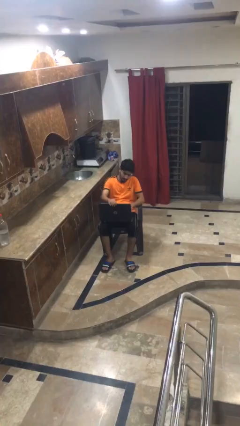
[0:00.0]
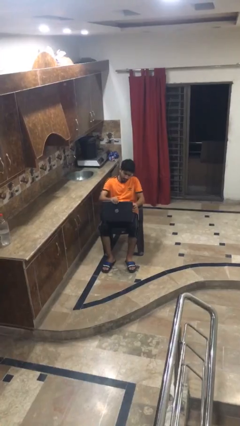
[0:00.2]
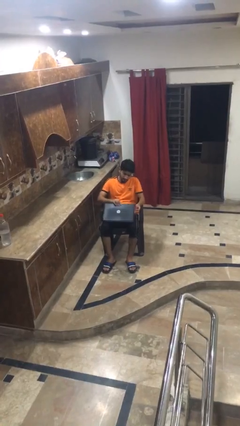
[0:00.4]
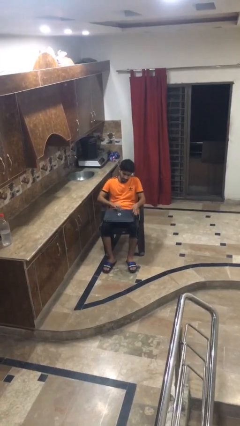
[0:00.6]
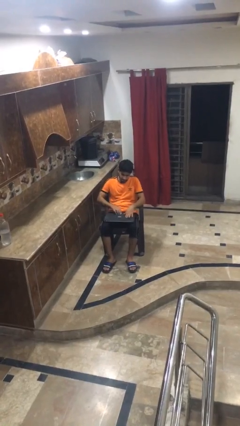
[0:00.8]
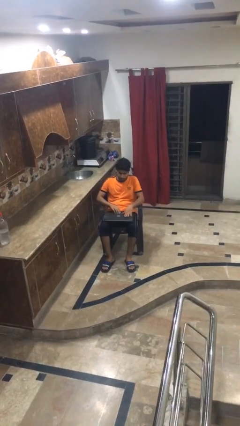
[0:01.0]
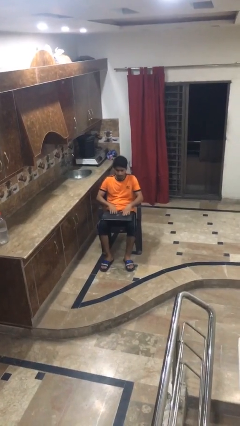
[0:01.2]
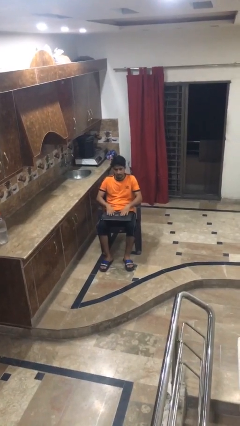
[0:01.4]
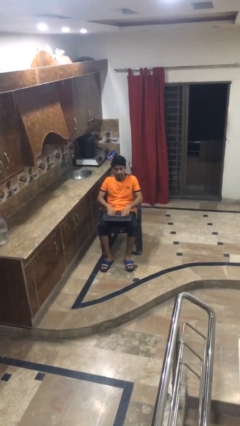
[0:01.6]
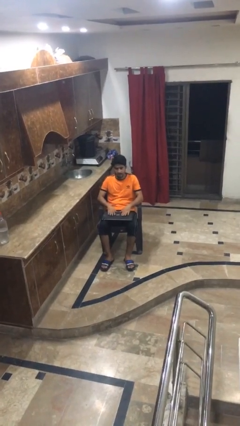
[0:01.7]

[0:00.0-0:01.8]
person closes laptop

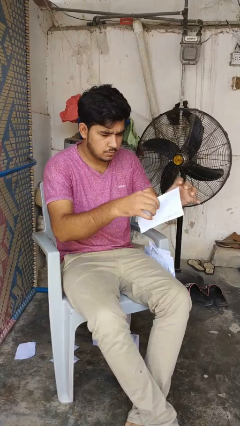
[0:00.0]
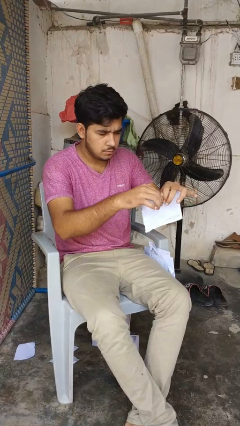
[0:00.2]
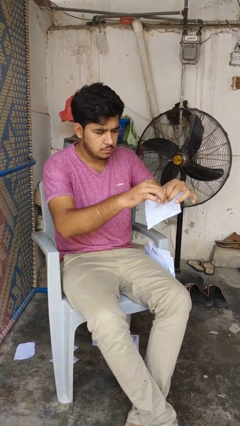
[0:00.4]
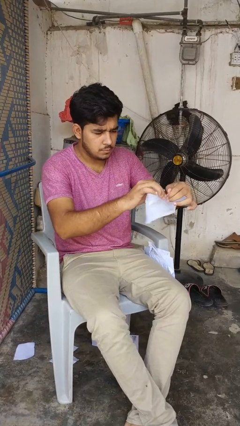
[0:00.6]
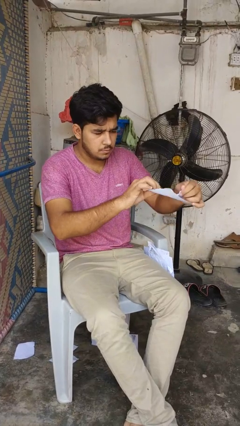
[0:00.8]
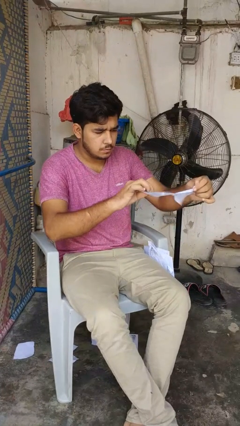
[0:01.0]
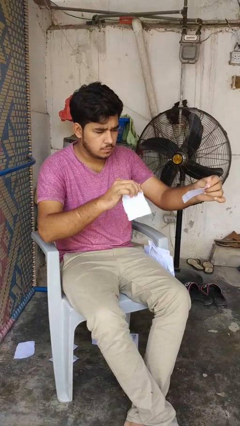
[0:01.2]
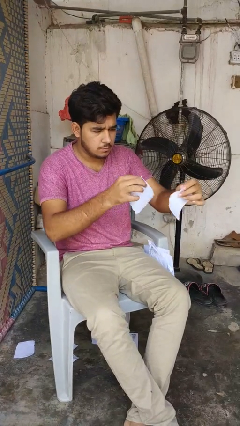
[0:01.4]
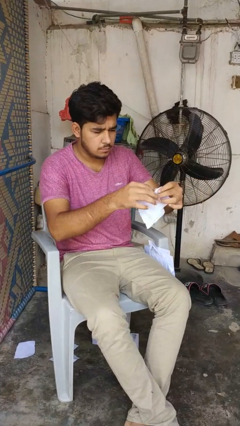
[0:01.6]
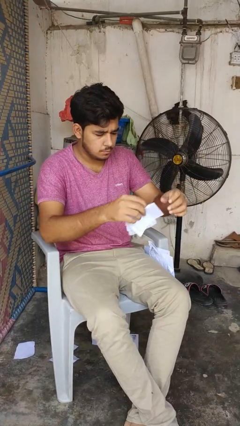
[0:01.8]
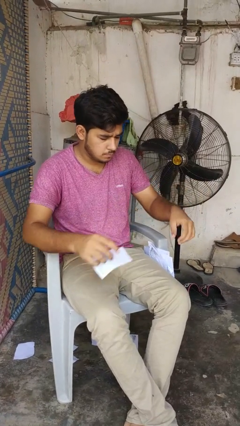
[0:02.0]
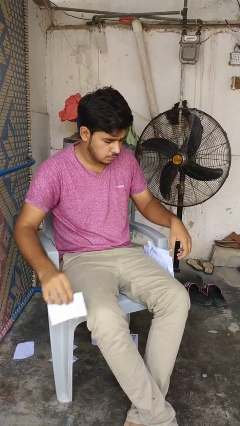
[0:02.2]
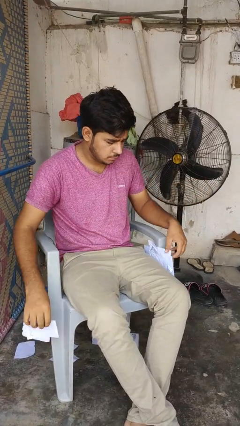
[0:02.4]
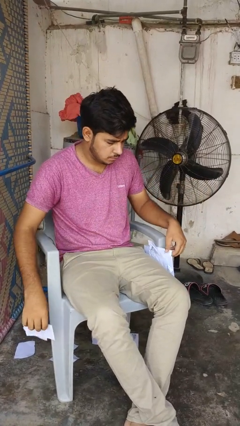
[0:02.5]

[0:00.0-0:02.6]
person tears paper

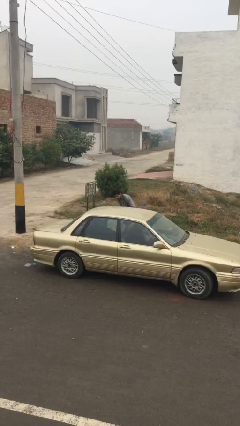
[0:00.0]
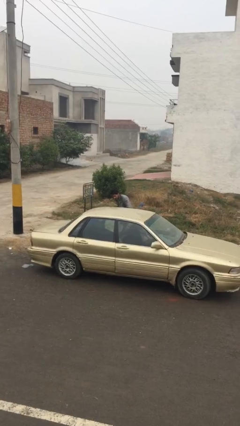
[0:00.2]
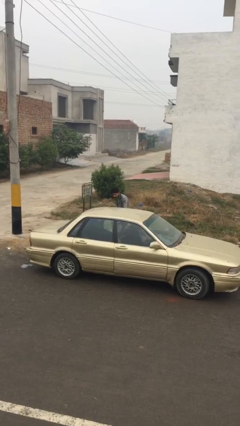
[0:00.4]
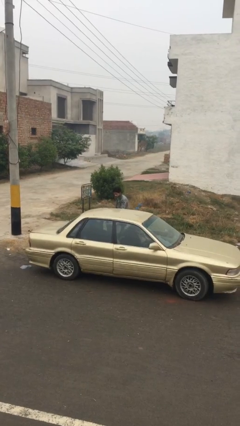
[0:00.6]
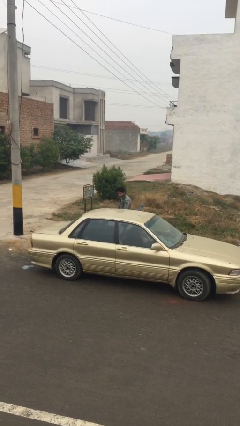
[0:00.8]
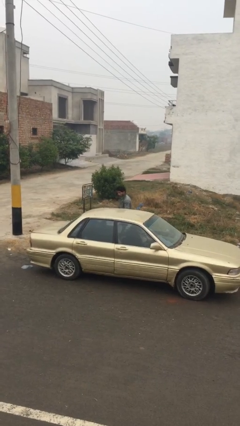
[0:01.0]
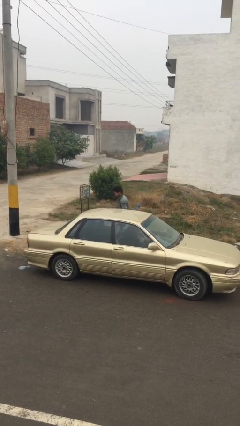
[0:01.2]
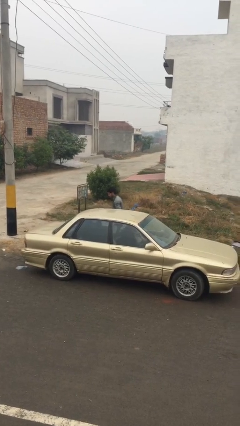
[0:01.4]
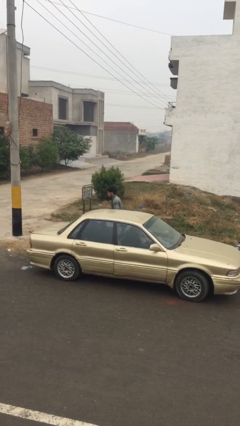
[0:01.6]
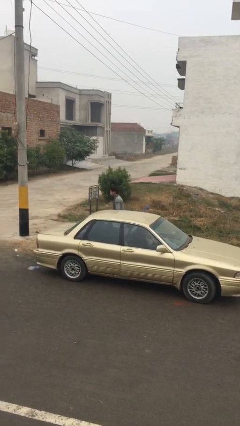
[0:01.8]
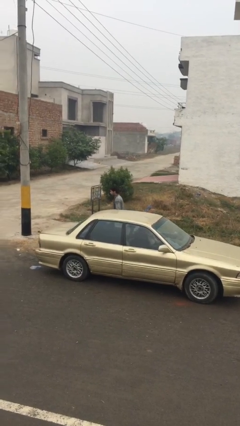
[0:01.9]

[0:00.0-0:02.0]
person closes car door

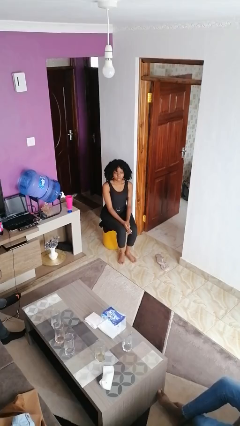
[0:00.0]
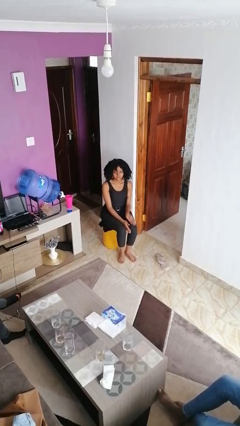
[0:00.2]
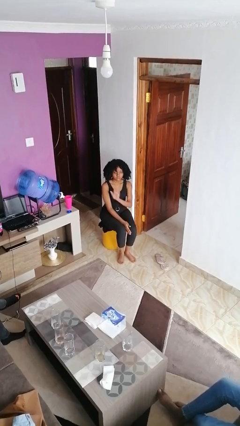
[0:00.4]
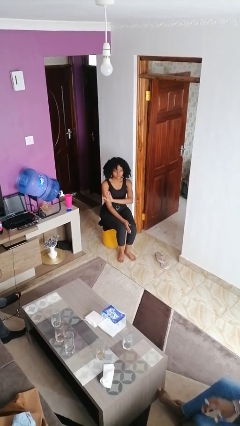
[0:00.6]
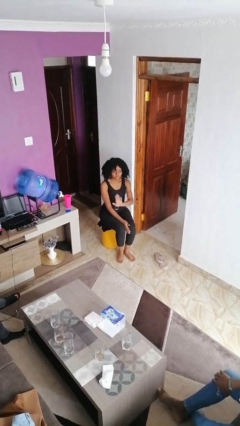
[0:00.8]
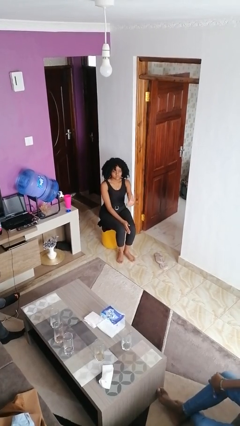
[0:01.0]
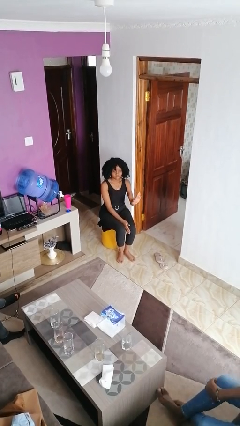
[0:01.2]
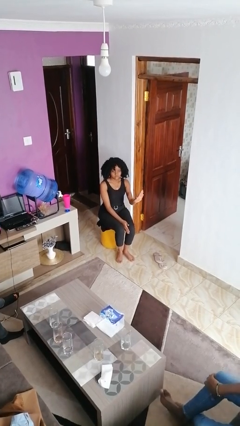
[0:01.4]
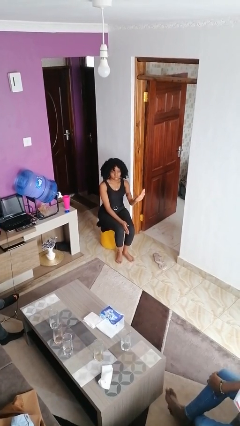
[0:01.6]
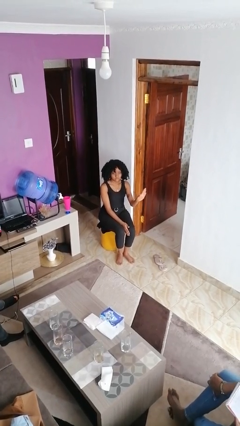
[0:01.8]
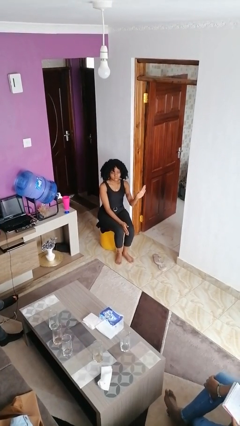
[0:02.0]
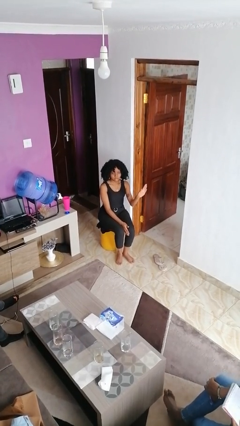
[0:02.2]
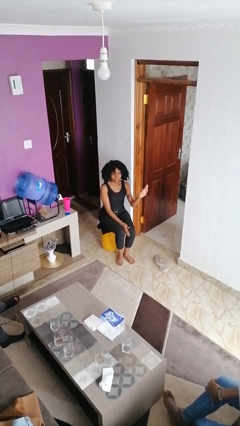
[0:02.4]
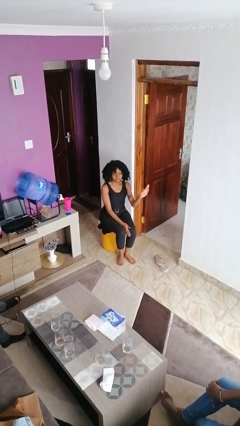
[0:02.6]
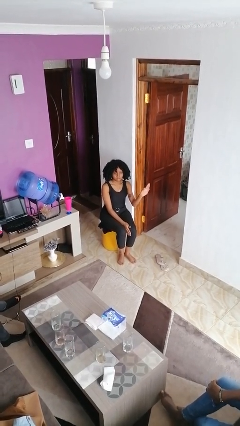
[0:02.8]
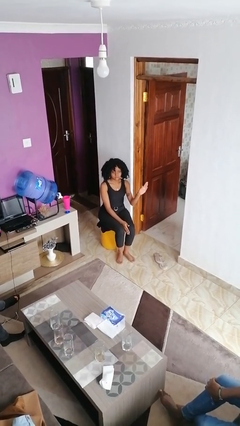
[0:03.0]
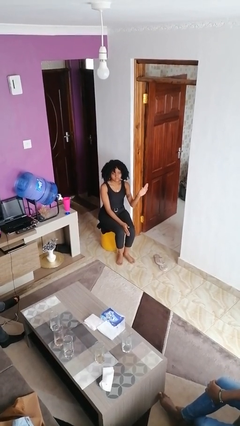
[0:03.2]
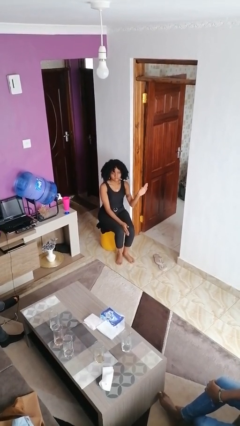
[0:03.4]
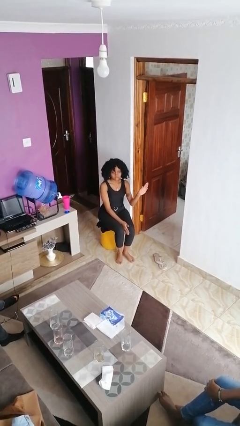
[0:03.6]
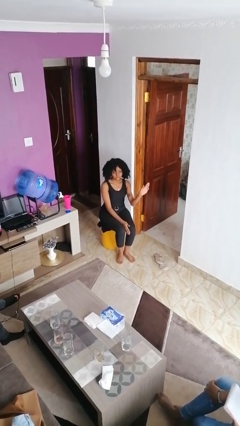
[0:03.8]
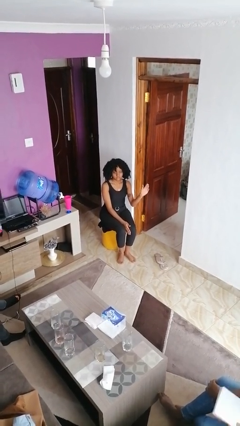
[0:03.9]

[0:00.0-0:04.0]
person gestures swipe left

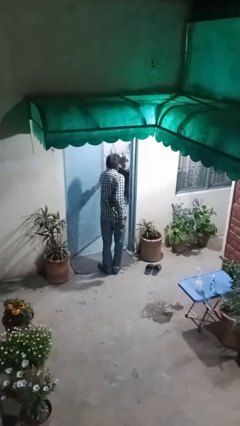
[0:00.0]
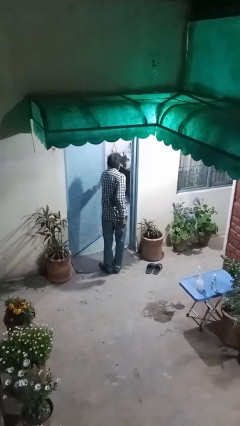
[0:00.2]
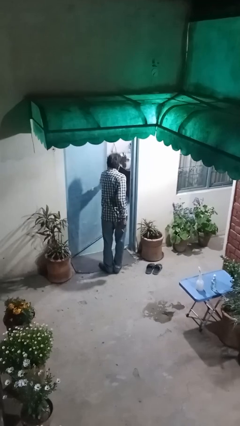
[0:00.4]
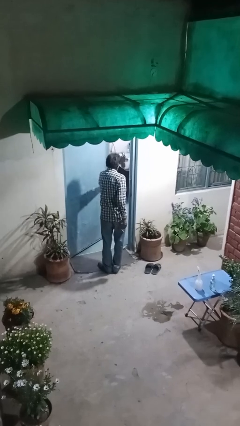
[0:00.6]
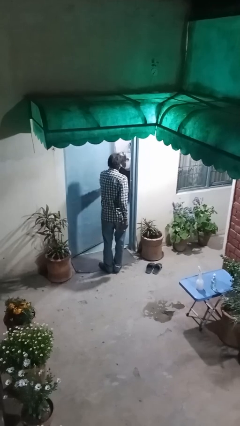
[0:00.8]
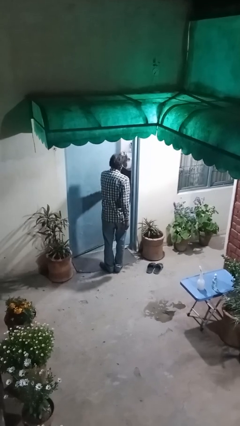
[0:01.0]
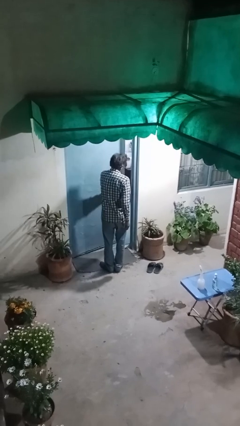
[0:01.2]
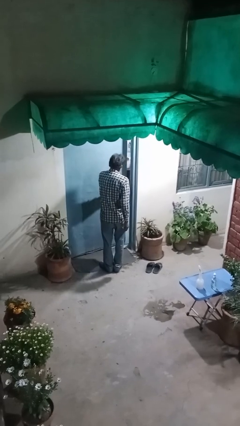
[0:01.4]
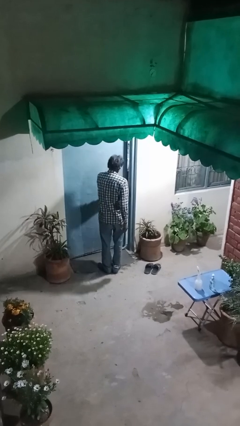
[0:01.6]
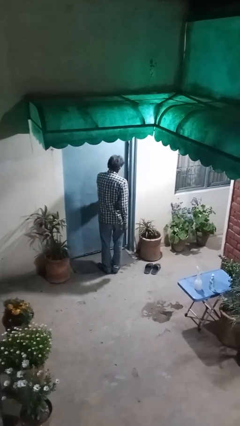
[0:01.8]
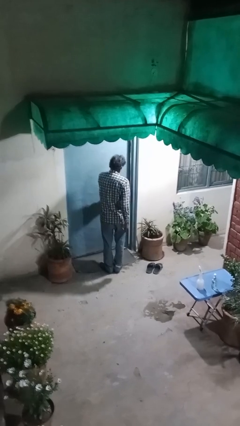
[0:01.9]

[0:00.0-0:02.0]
person closes facility door

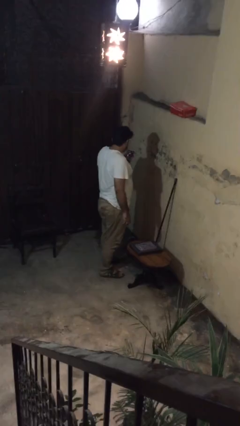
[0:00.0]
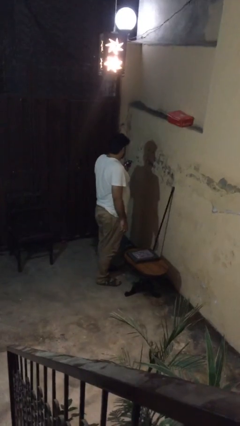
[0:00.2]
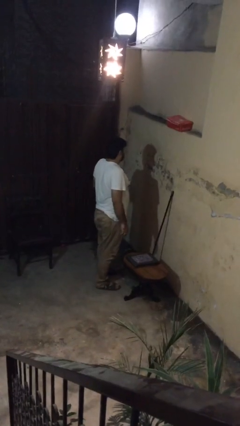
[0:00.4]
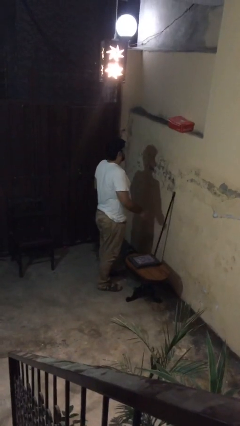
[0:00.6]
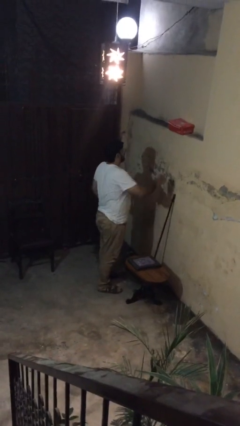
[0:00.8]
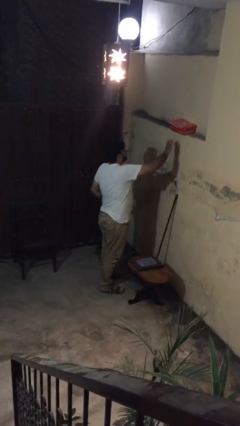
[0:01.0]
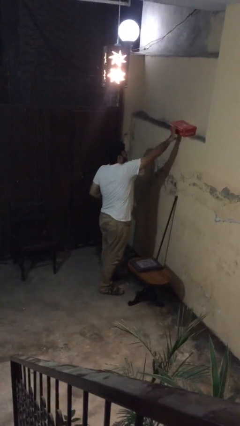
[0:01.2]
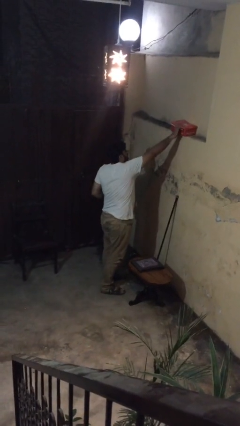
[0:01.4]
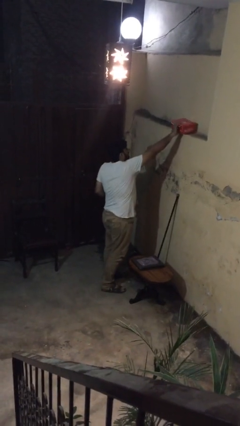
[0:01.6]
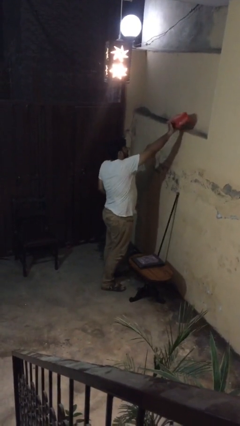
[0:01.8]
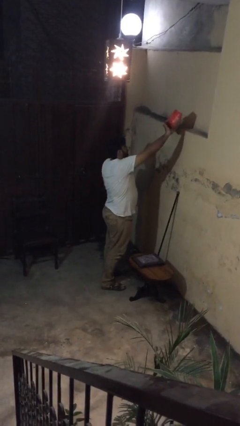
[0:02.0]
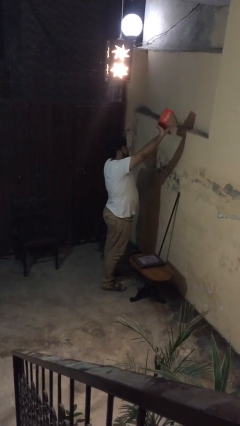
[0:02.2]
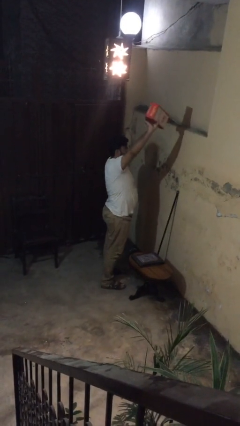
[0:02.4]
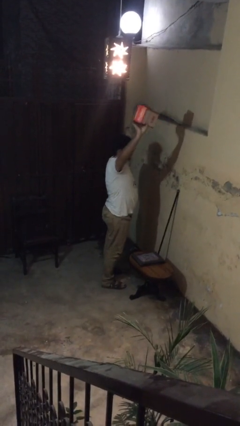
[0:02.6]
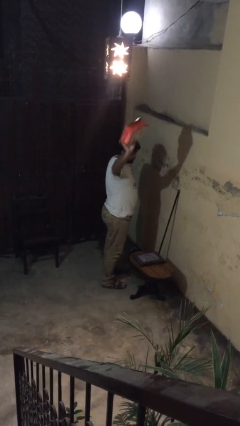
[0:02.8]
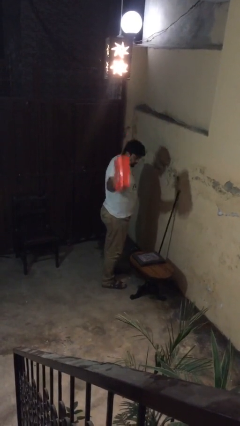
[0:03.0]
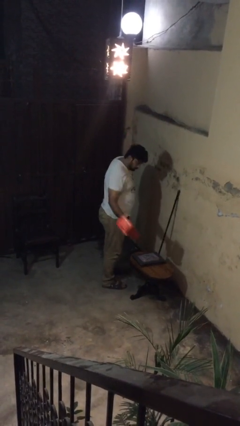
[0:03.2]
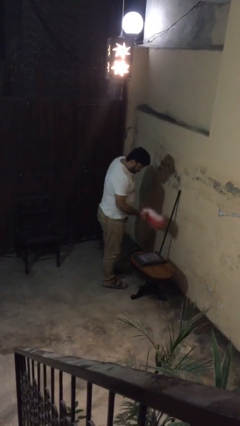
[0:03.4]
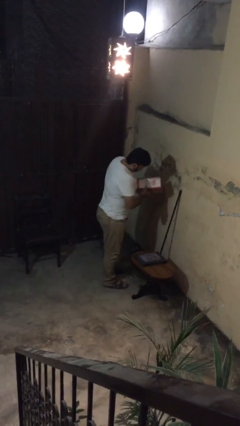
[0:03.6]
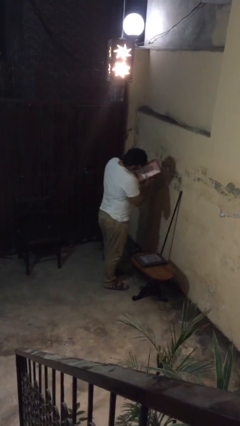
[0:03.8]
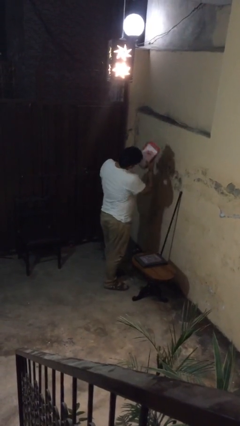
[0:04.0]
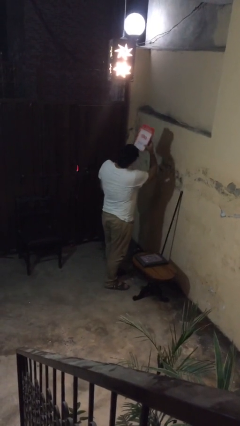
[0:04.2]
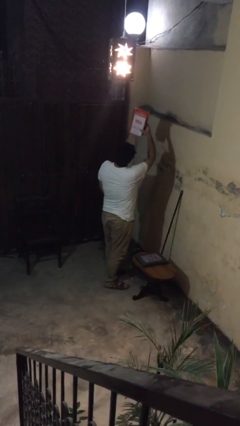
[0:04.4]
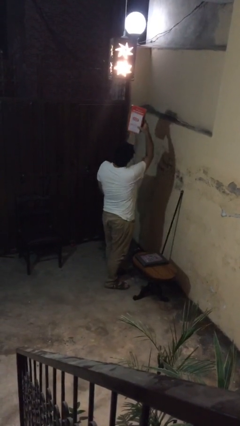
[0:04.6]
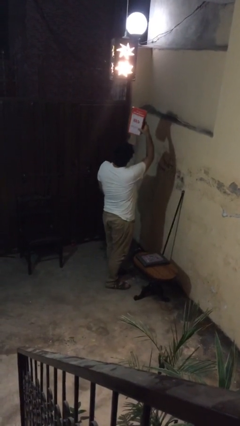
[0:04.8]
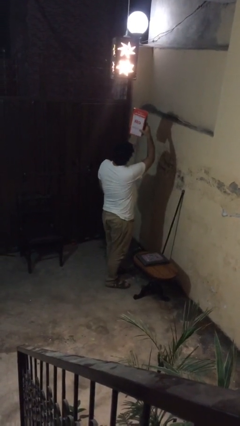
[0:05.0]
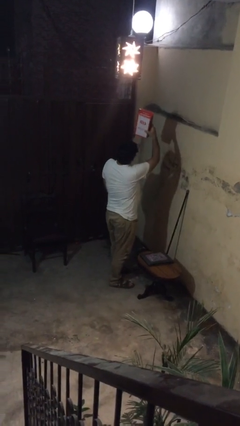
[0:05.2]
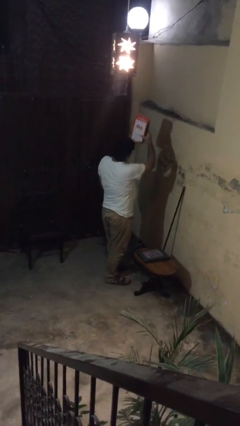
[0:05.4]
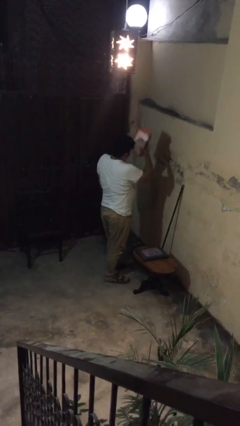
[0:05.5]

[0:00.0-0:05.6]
person picks up object from shelf
